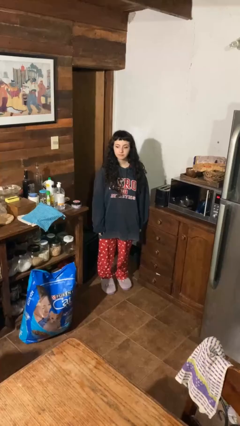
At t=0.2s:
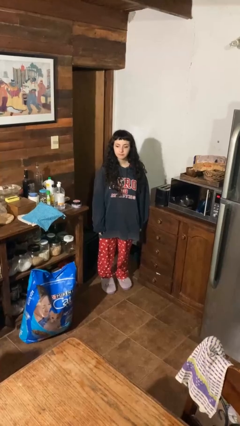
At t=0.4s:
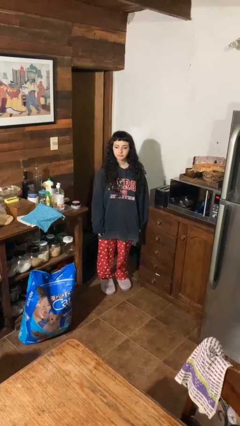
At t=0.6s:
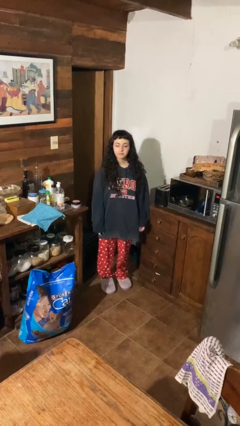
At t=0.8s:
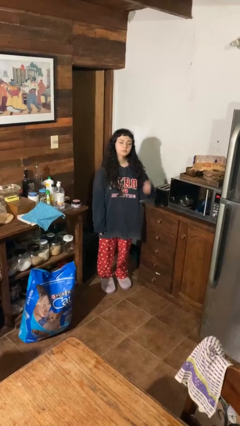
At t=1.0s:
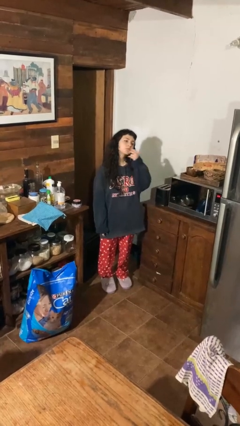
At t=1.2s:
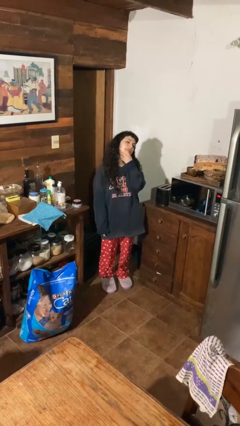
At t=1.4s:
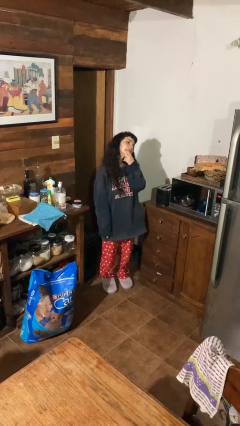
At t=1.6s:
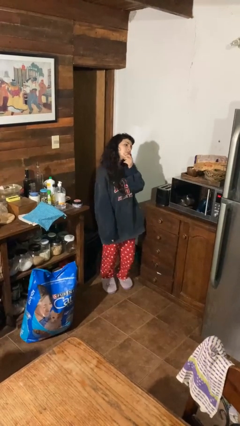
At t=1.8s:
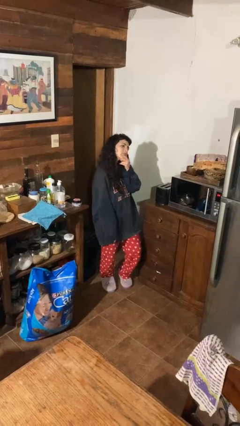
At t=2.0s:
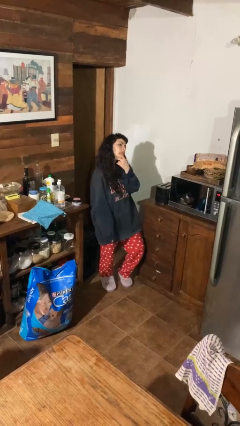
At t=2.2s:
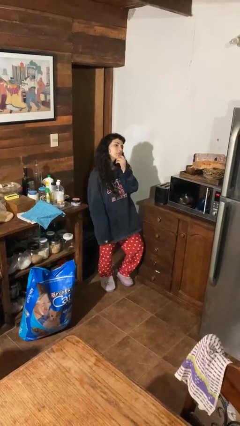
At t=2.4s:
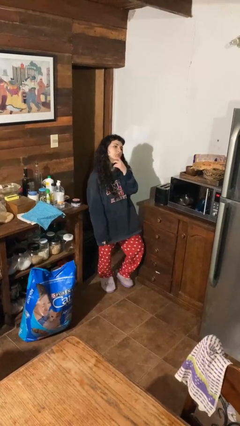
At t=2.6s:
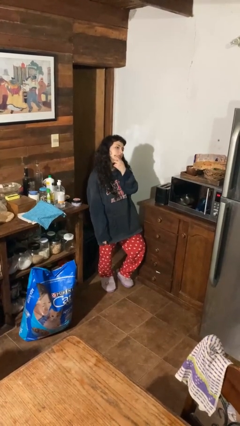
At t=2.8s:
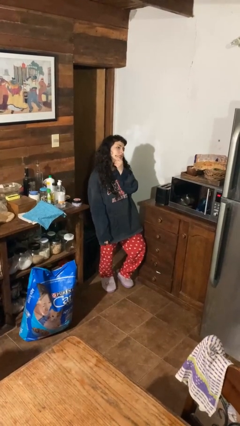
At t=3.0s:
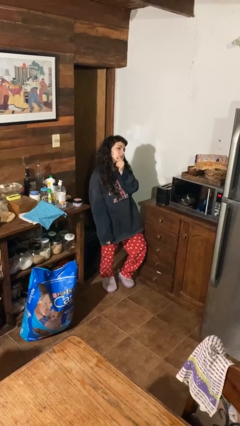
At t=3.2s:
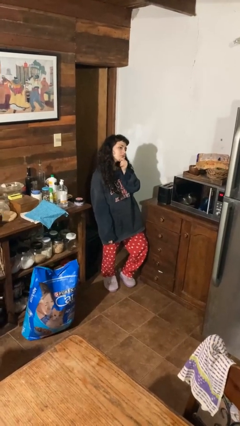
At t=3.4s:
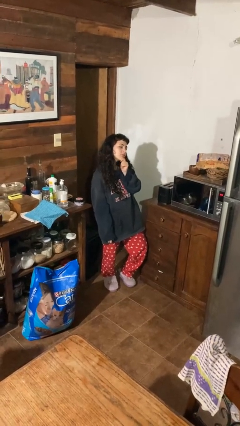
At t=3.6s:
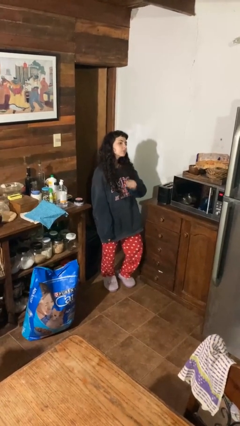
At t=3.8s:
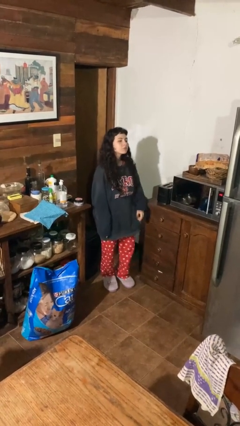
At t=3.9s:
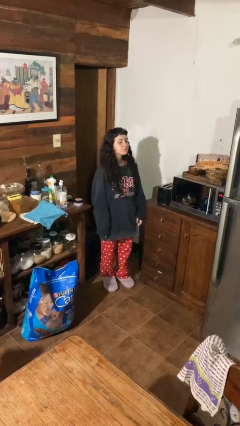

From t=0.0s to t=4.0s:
person strokes chin

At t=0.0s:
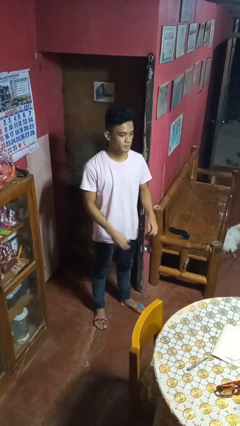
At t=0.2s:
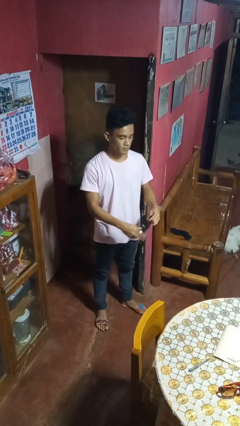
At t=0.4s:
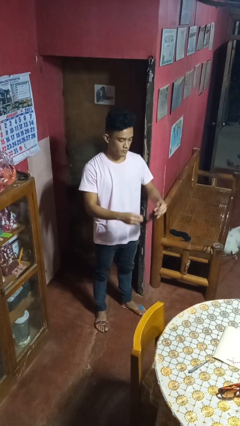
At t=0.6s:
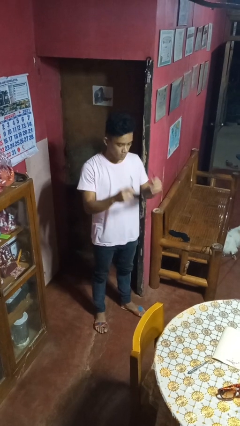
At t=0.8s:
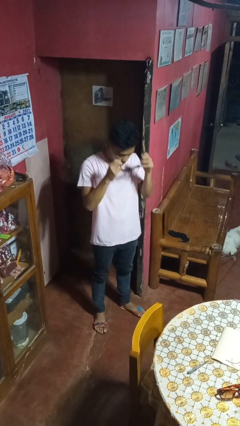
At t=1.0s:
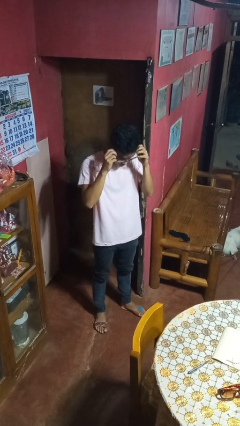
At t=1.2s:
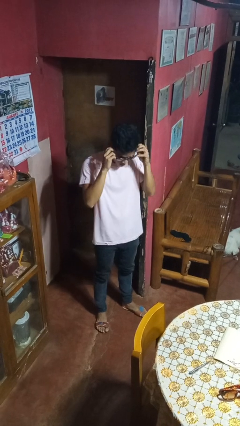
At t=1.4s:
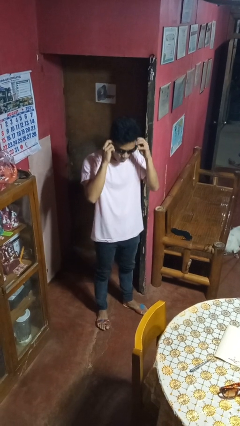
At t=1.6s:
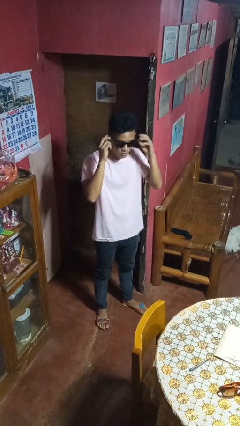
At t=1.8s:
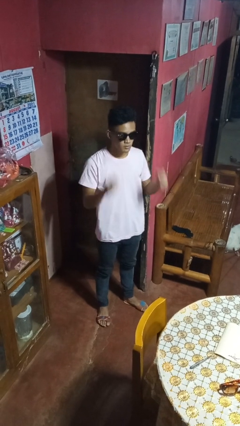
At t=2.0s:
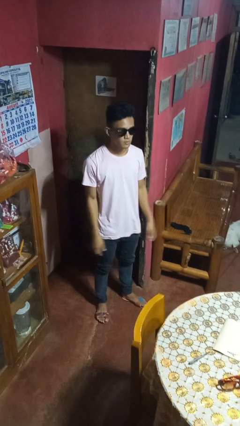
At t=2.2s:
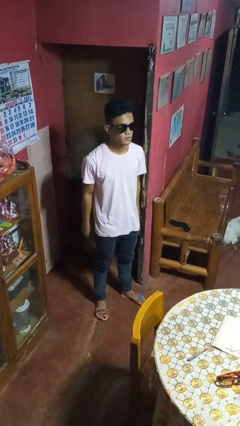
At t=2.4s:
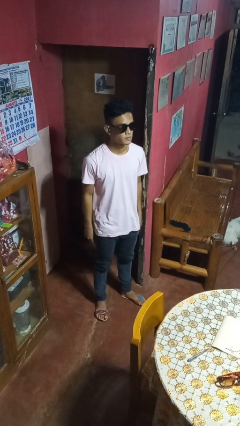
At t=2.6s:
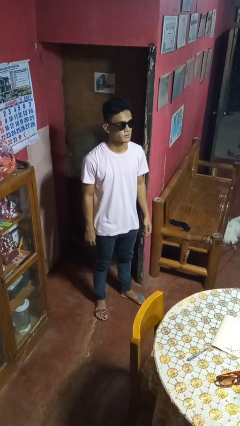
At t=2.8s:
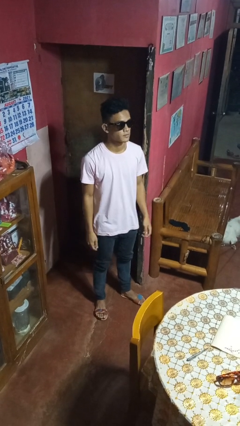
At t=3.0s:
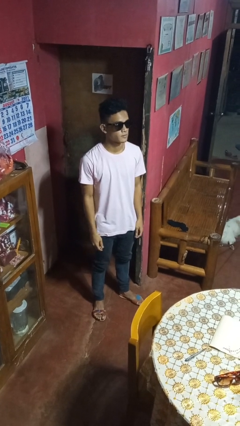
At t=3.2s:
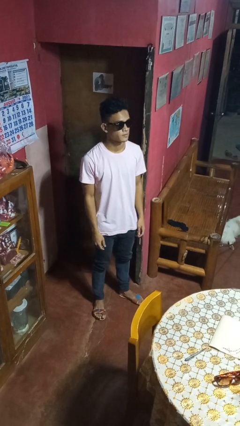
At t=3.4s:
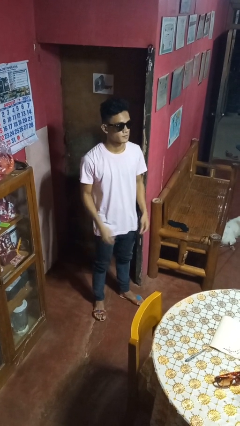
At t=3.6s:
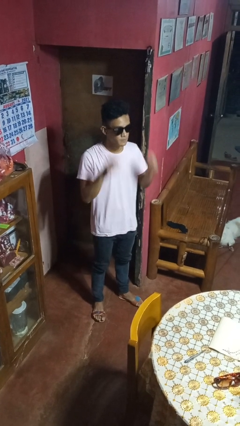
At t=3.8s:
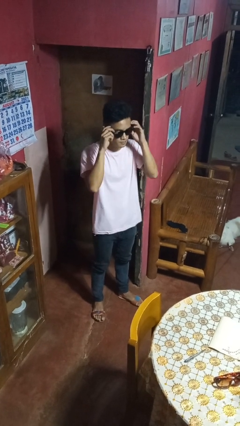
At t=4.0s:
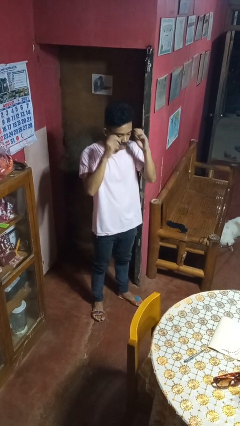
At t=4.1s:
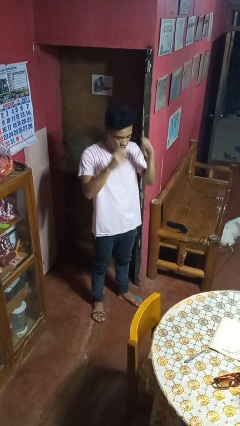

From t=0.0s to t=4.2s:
person puts on sunglasses

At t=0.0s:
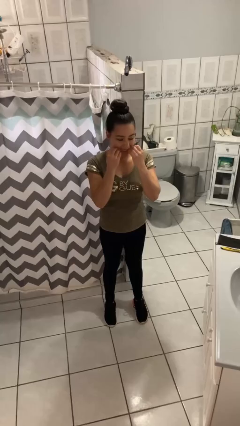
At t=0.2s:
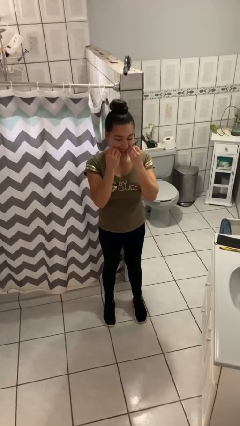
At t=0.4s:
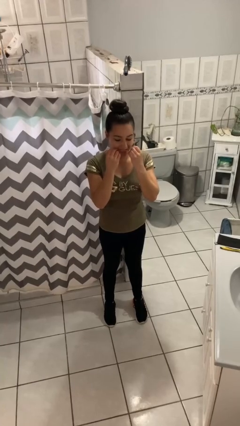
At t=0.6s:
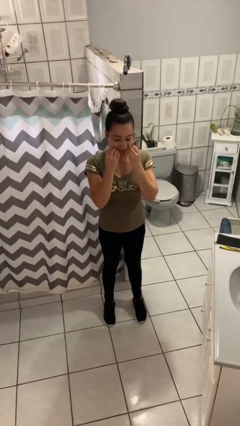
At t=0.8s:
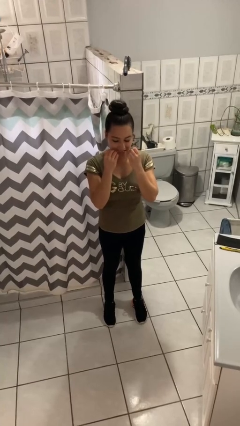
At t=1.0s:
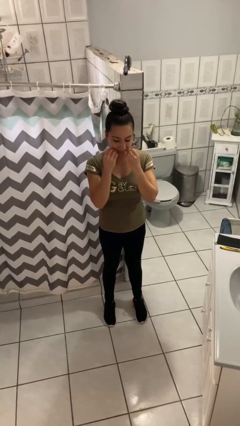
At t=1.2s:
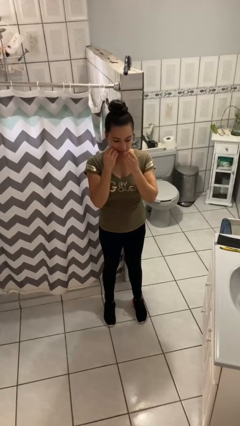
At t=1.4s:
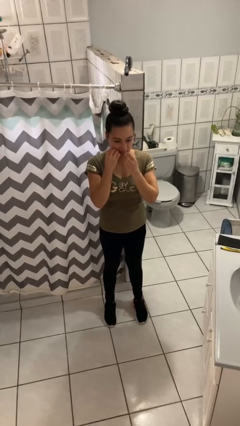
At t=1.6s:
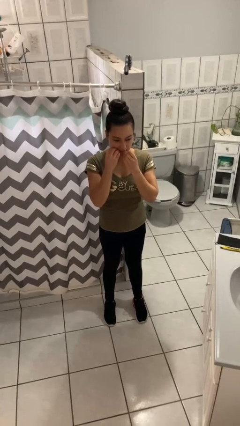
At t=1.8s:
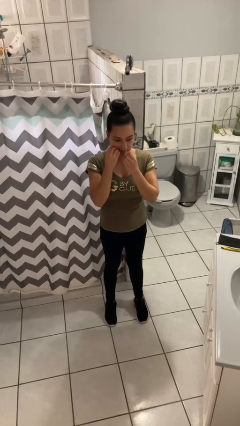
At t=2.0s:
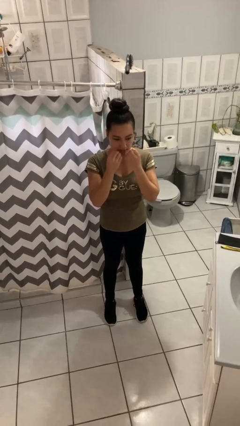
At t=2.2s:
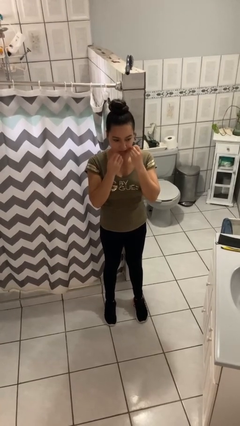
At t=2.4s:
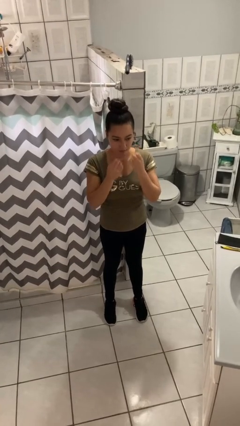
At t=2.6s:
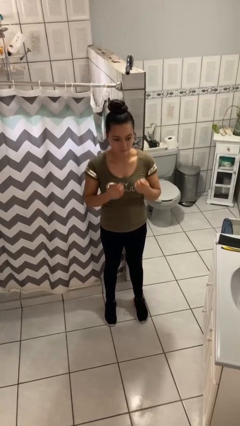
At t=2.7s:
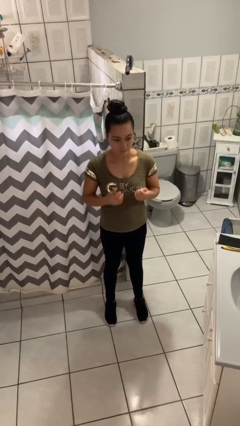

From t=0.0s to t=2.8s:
person flosses

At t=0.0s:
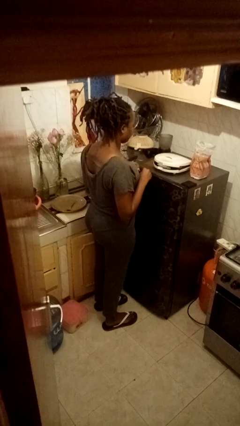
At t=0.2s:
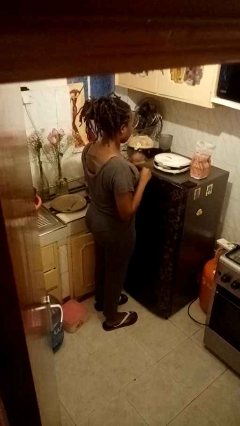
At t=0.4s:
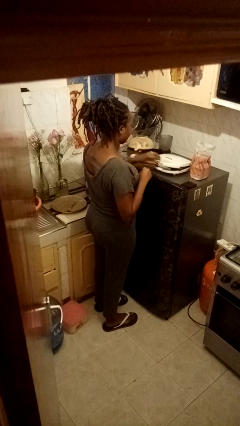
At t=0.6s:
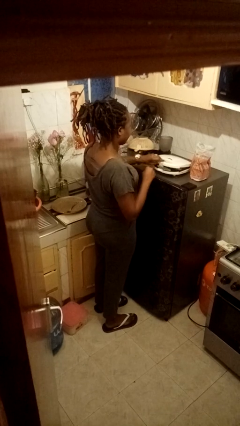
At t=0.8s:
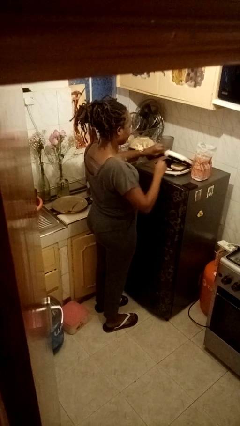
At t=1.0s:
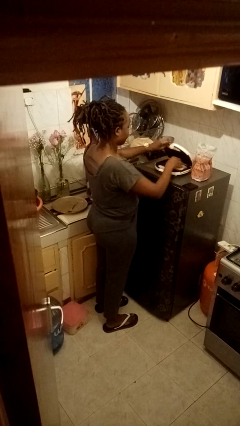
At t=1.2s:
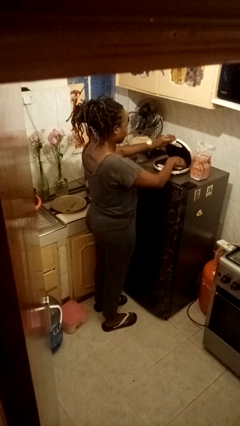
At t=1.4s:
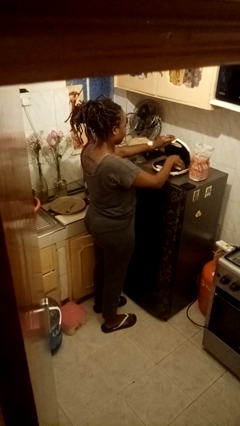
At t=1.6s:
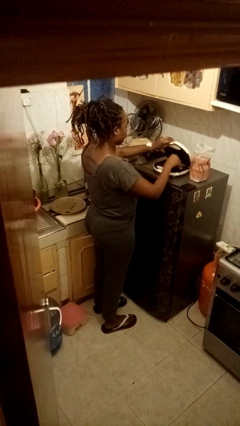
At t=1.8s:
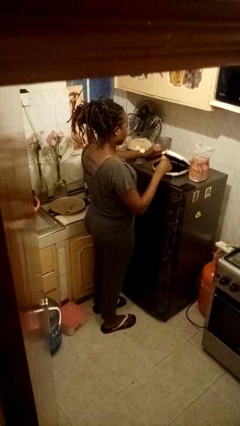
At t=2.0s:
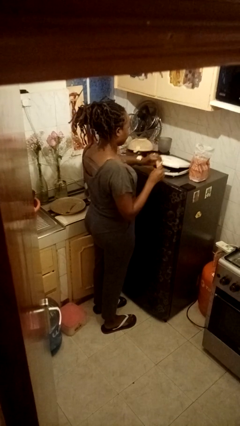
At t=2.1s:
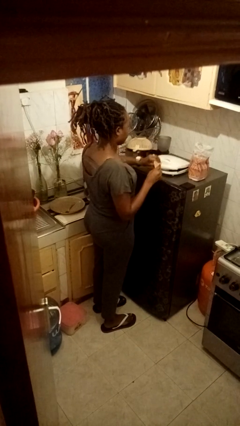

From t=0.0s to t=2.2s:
person takes object from toaster

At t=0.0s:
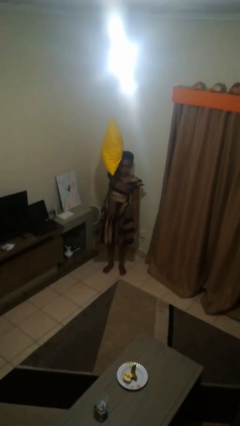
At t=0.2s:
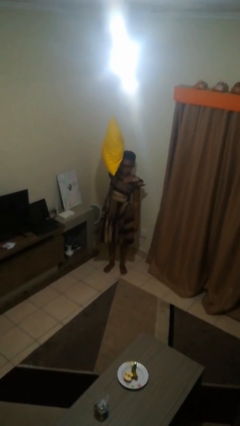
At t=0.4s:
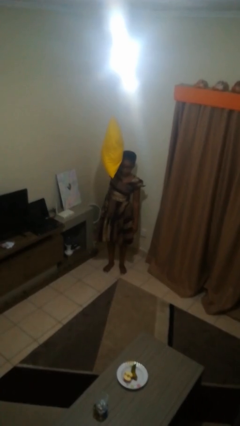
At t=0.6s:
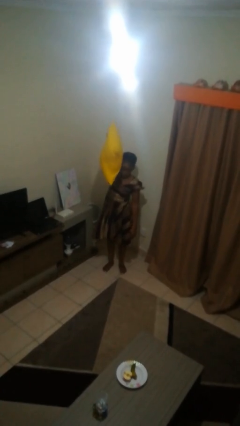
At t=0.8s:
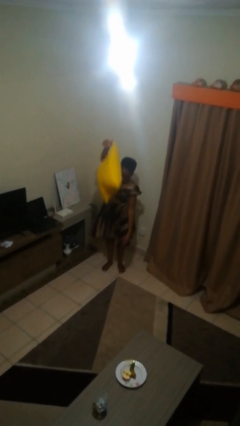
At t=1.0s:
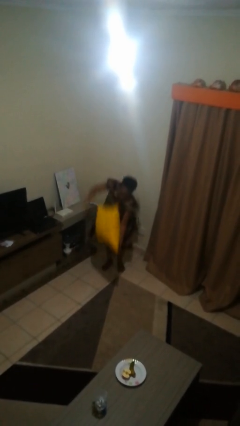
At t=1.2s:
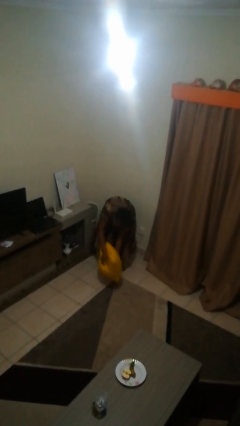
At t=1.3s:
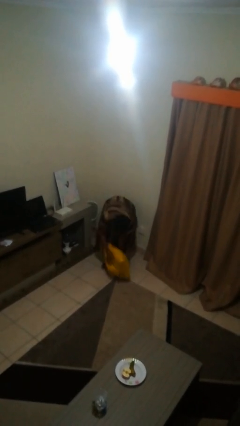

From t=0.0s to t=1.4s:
person drops object

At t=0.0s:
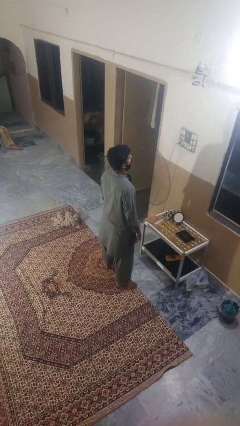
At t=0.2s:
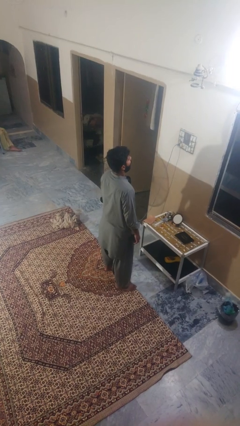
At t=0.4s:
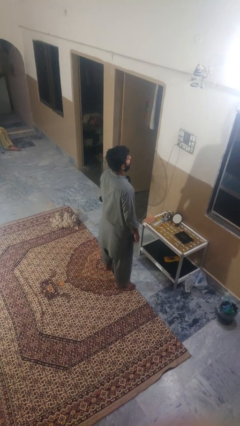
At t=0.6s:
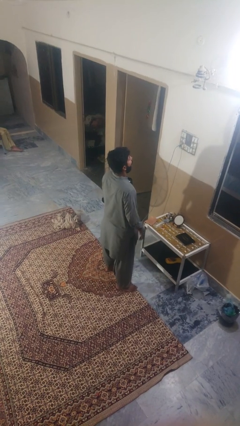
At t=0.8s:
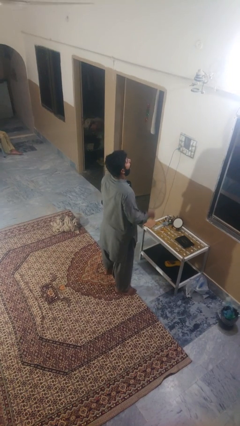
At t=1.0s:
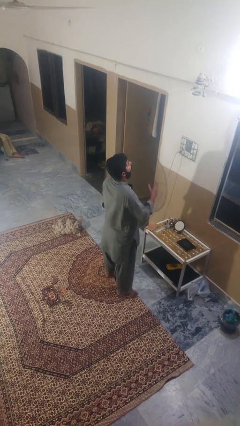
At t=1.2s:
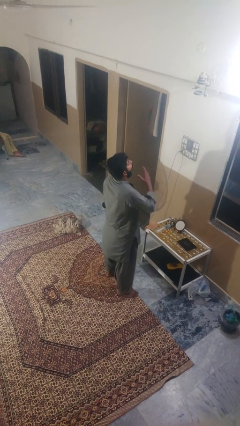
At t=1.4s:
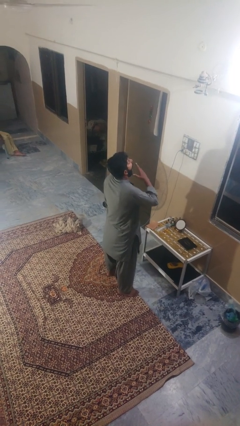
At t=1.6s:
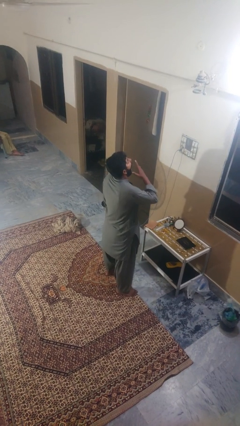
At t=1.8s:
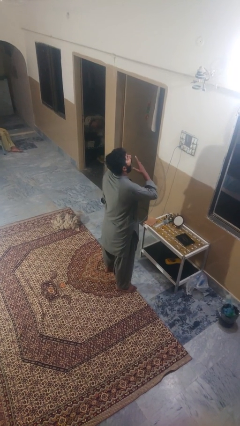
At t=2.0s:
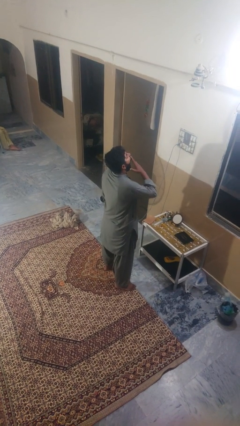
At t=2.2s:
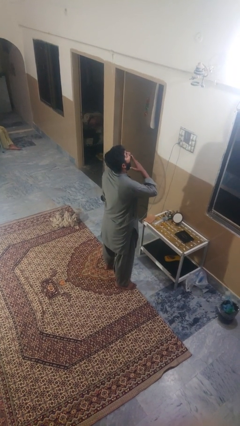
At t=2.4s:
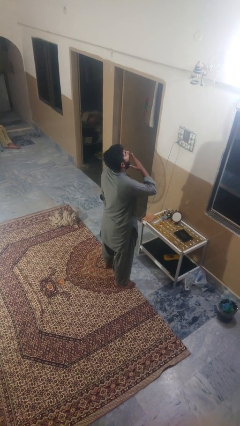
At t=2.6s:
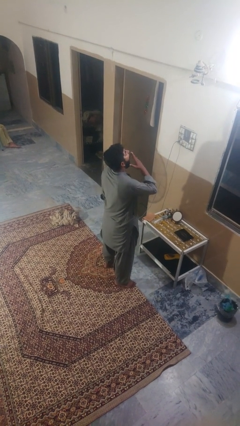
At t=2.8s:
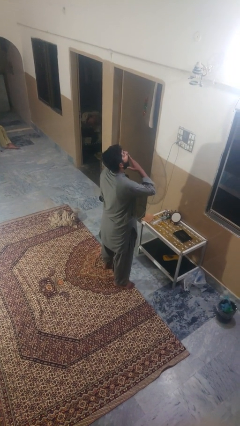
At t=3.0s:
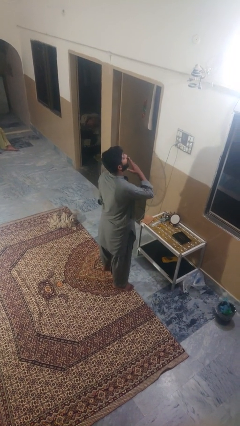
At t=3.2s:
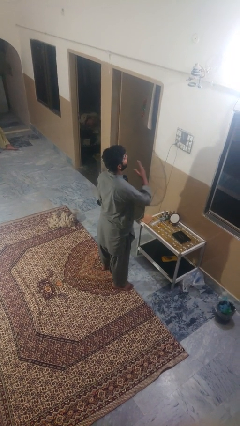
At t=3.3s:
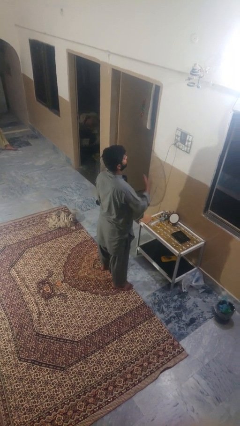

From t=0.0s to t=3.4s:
person yawns
